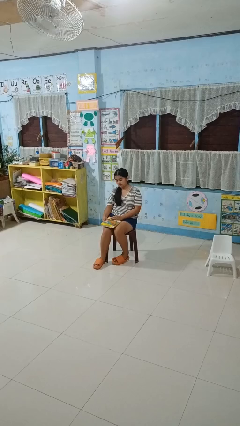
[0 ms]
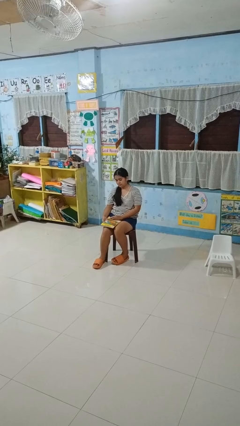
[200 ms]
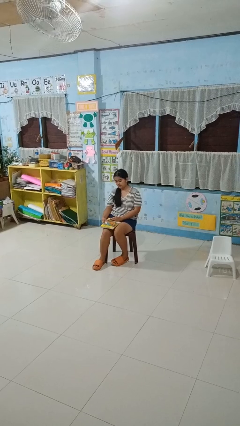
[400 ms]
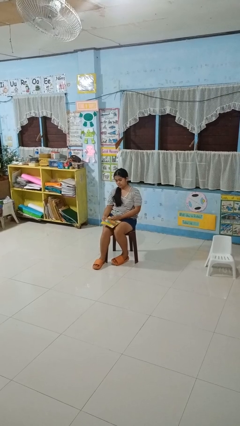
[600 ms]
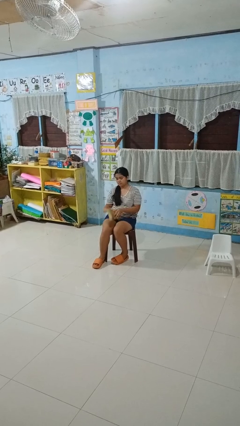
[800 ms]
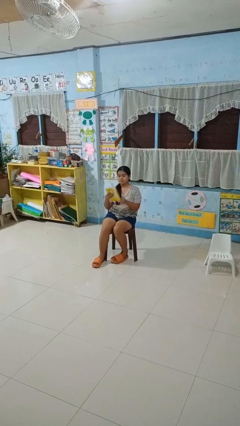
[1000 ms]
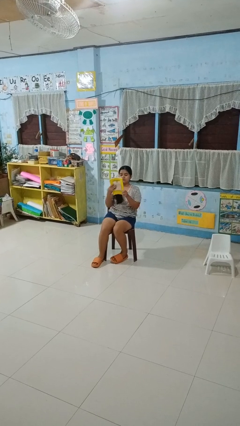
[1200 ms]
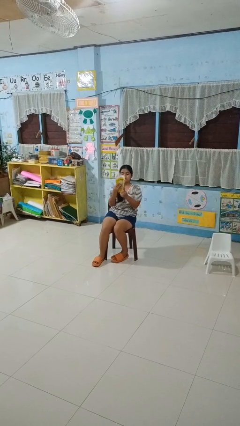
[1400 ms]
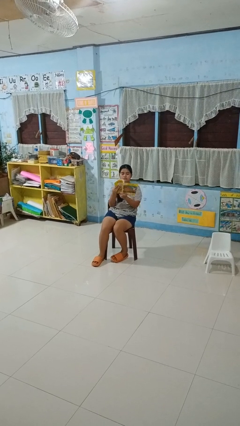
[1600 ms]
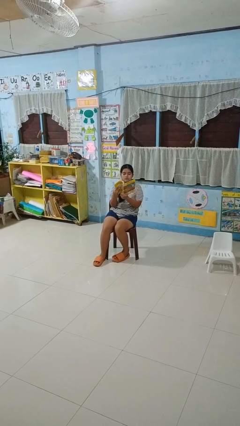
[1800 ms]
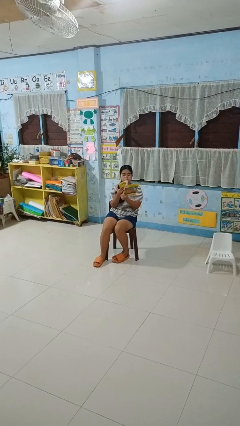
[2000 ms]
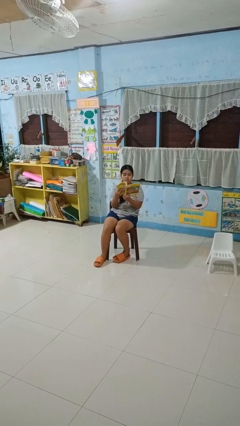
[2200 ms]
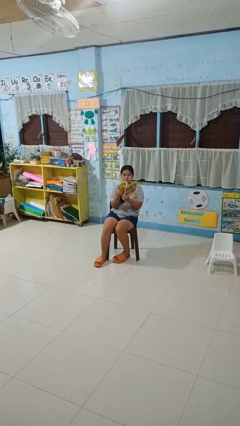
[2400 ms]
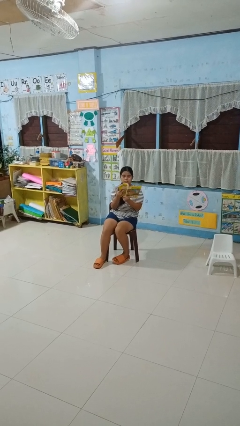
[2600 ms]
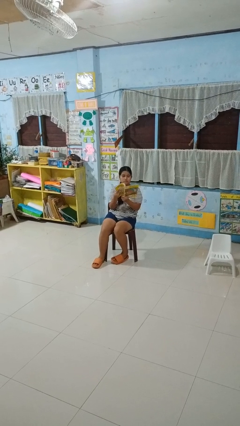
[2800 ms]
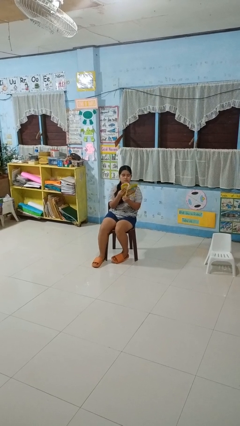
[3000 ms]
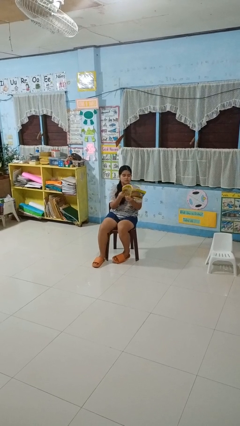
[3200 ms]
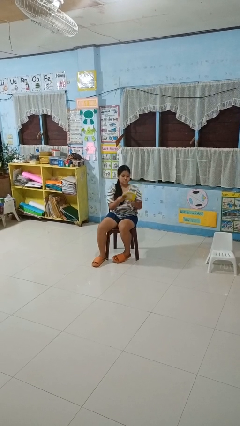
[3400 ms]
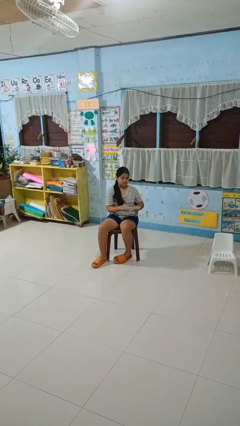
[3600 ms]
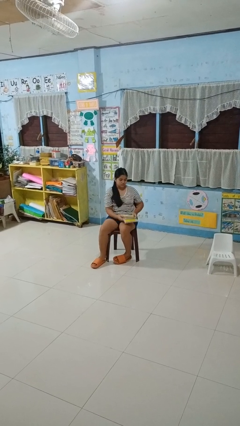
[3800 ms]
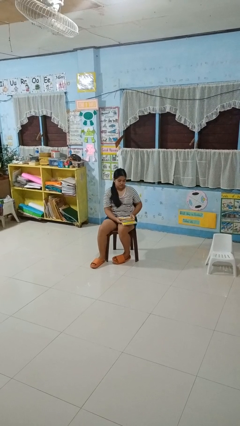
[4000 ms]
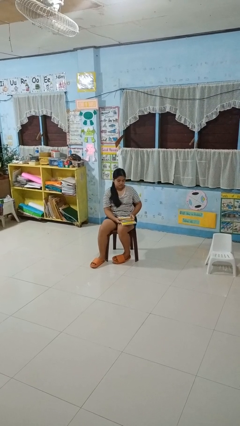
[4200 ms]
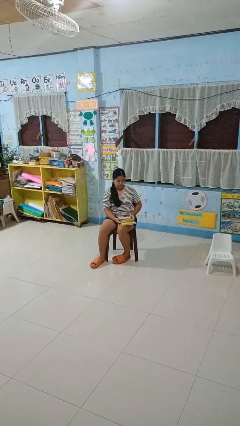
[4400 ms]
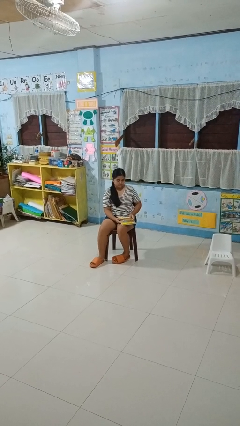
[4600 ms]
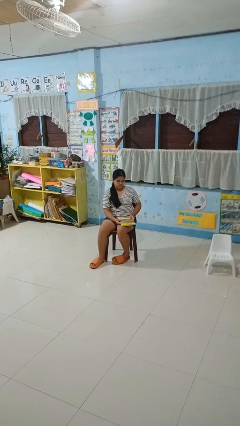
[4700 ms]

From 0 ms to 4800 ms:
person reads book

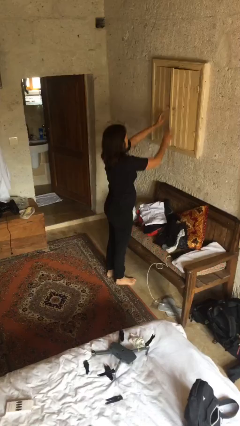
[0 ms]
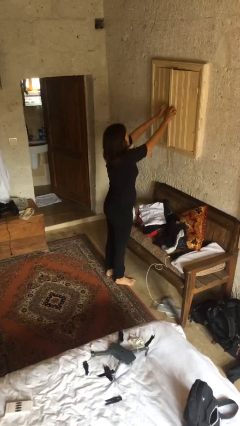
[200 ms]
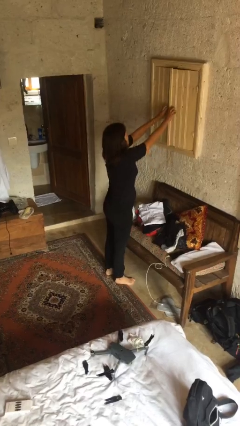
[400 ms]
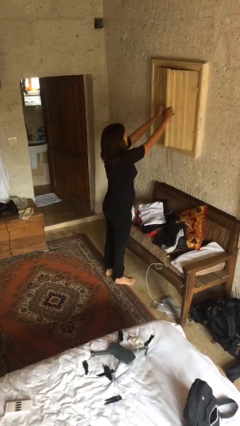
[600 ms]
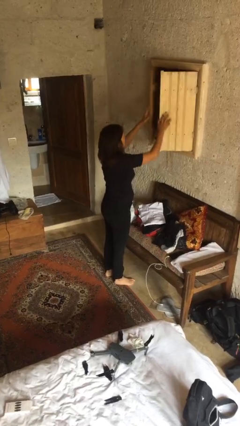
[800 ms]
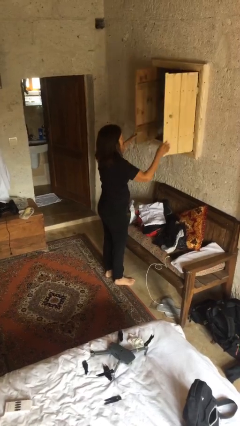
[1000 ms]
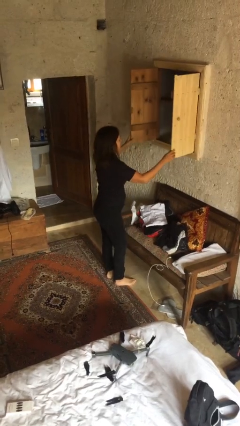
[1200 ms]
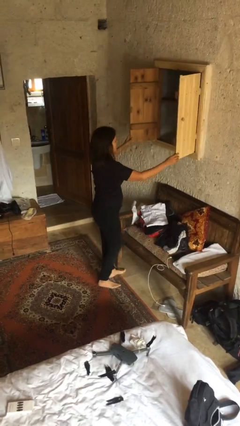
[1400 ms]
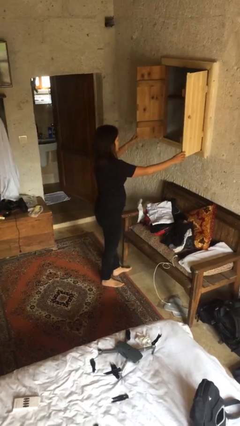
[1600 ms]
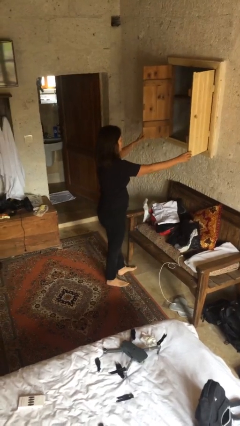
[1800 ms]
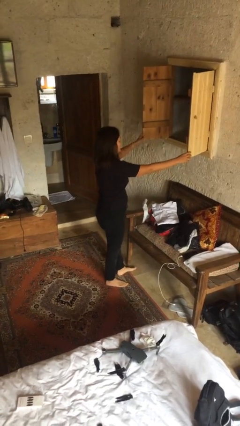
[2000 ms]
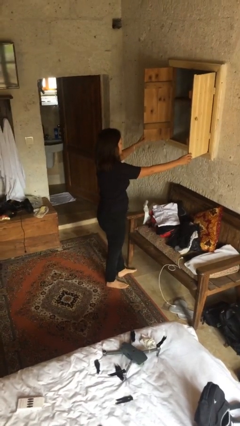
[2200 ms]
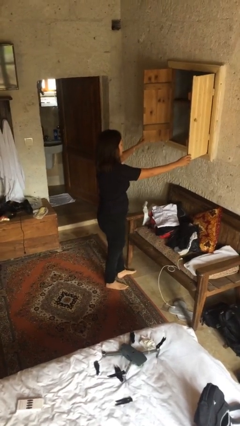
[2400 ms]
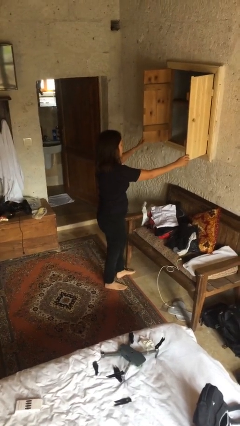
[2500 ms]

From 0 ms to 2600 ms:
person opens dresser drawer

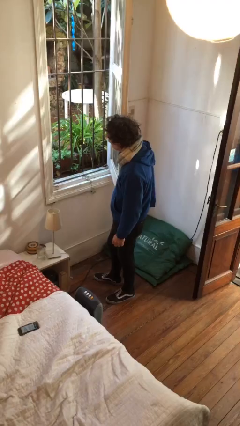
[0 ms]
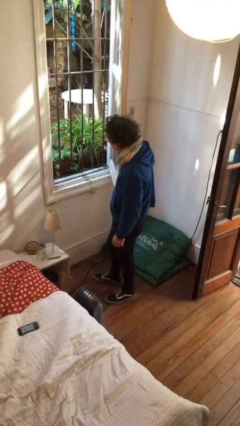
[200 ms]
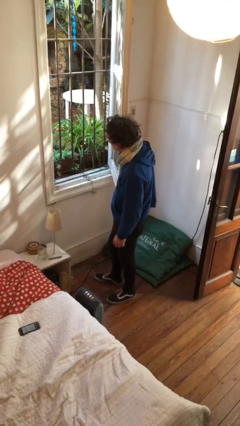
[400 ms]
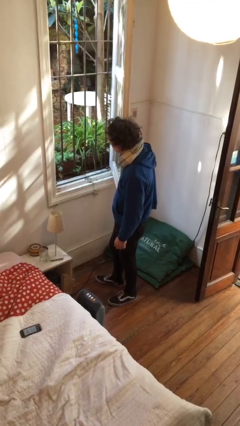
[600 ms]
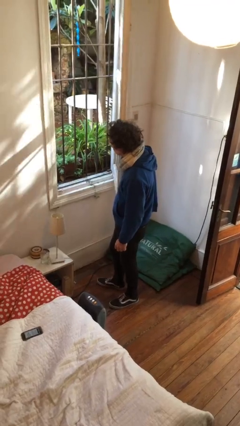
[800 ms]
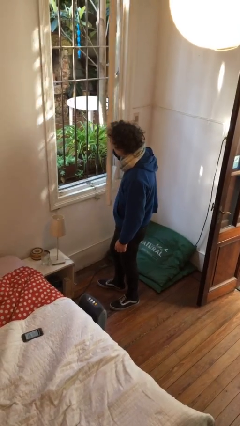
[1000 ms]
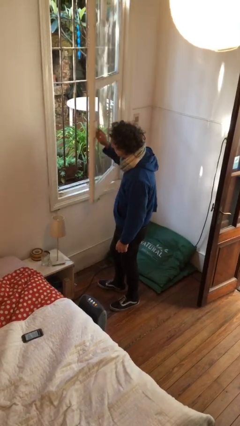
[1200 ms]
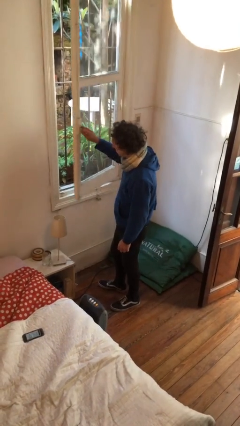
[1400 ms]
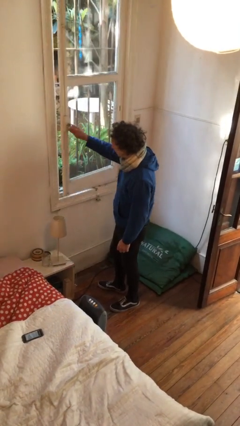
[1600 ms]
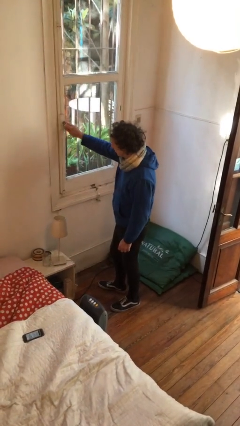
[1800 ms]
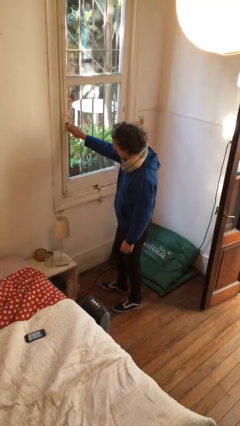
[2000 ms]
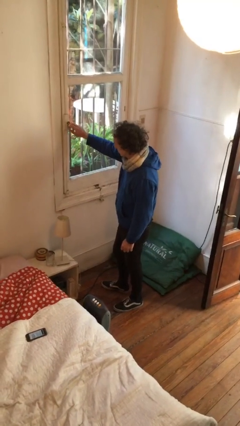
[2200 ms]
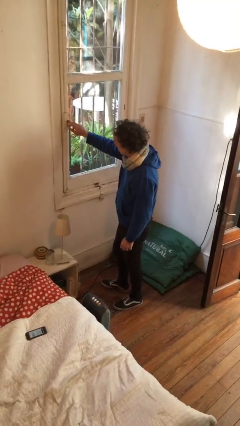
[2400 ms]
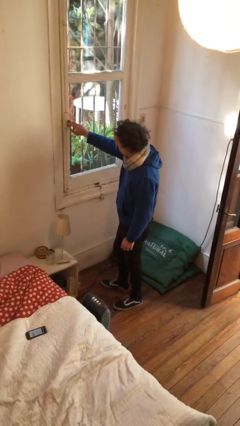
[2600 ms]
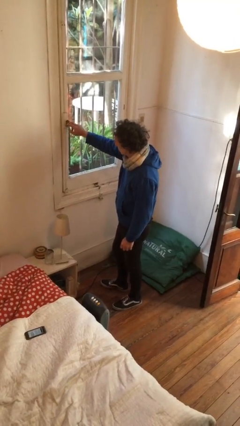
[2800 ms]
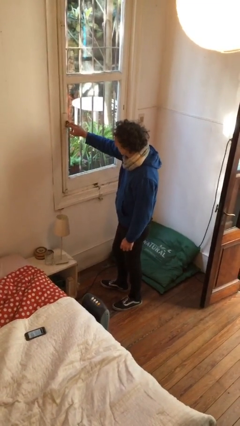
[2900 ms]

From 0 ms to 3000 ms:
person closes home window

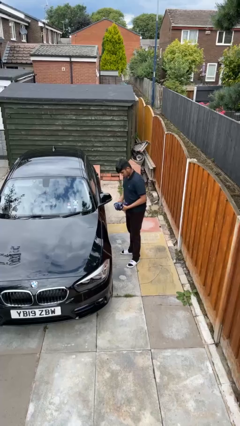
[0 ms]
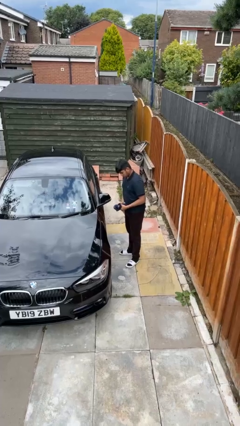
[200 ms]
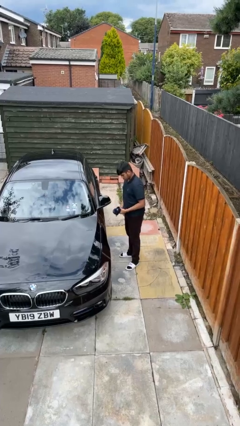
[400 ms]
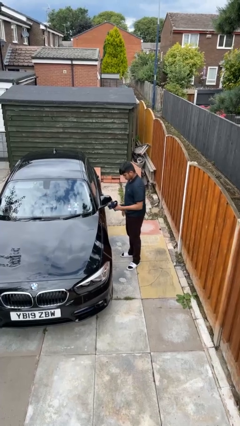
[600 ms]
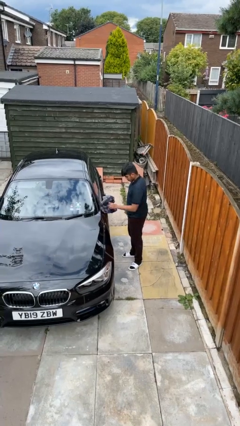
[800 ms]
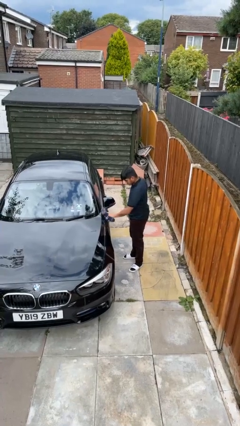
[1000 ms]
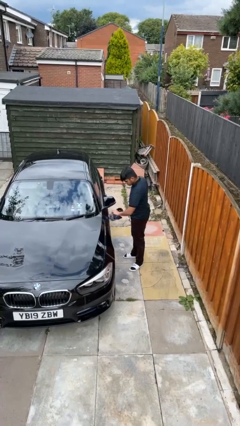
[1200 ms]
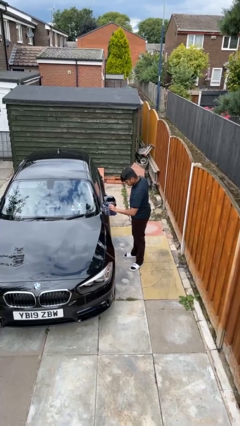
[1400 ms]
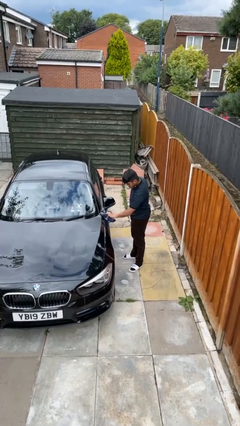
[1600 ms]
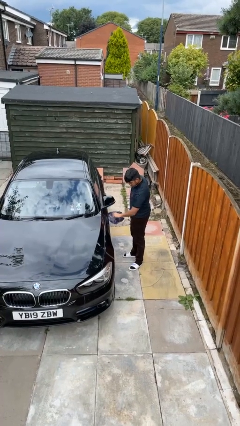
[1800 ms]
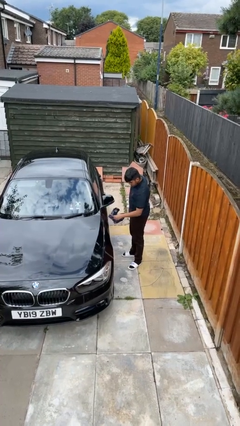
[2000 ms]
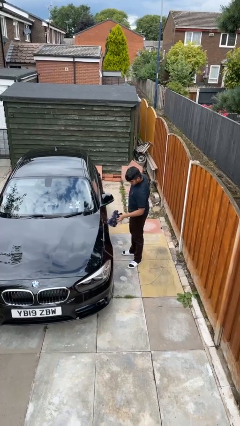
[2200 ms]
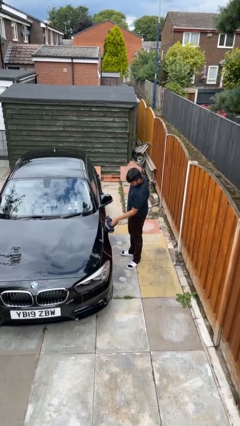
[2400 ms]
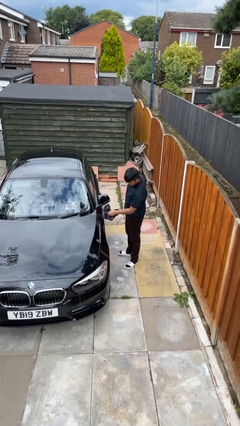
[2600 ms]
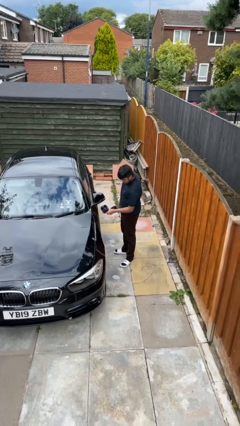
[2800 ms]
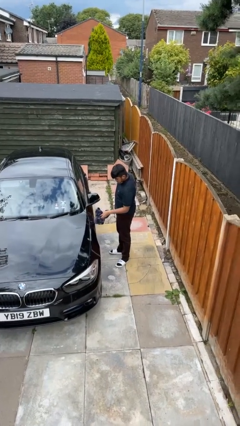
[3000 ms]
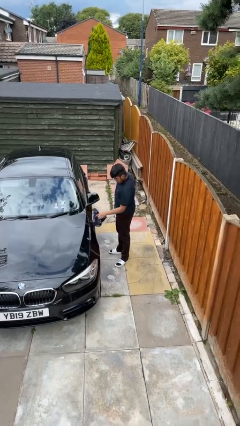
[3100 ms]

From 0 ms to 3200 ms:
person polishes car with rag

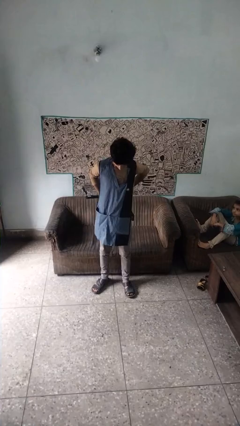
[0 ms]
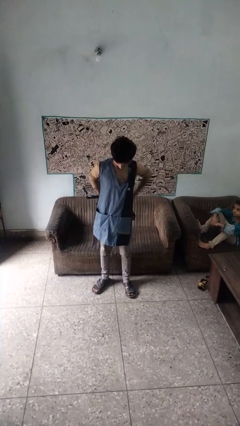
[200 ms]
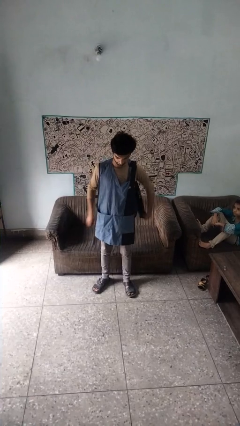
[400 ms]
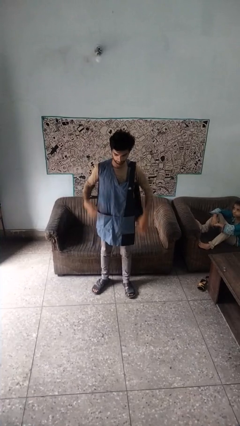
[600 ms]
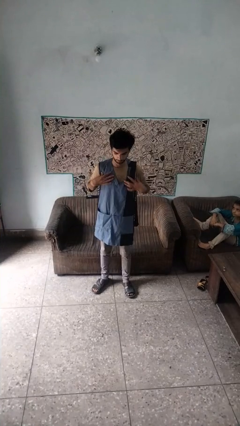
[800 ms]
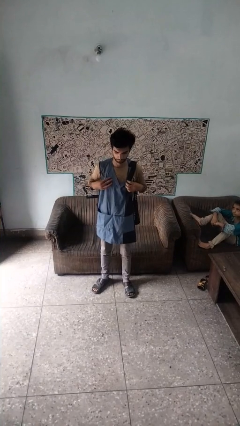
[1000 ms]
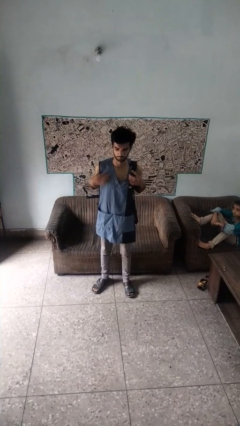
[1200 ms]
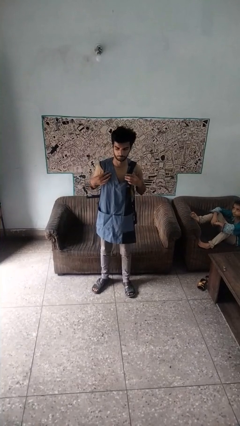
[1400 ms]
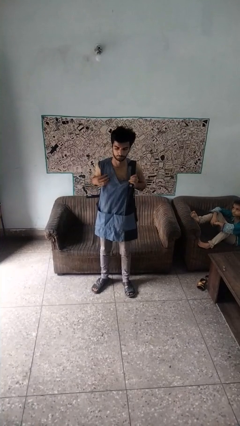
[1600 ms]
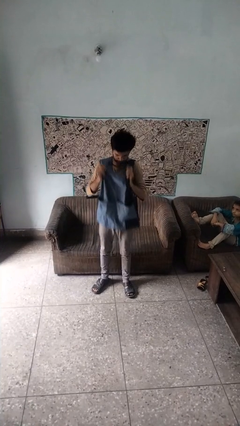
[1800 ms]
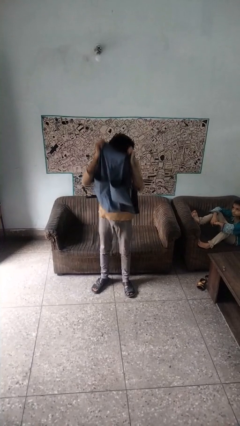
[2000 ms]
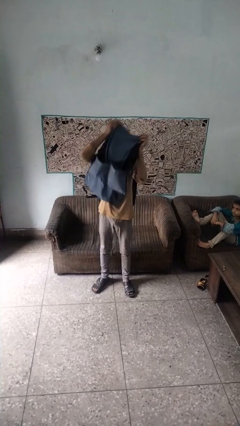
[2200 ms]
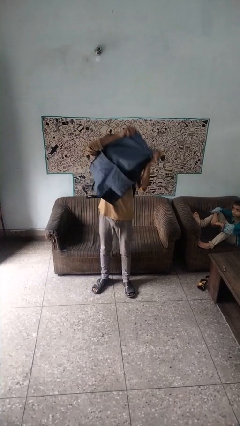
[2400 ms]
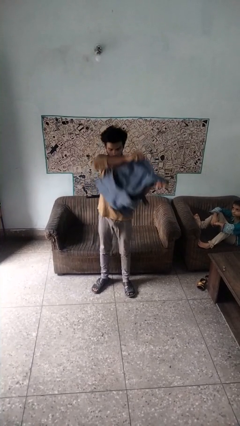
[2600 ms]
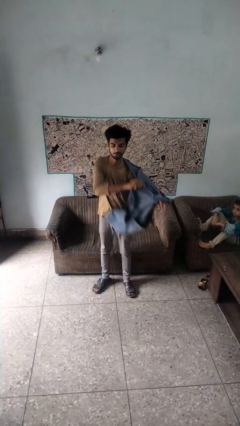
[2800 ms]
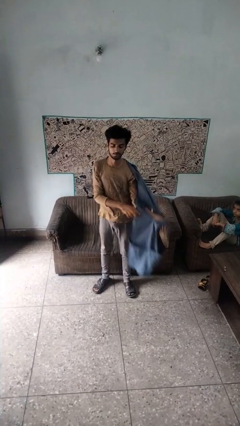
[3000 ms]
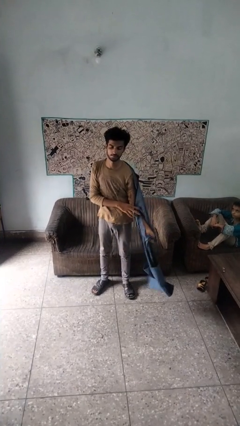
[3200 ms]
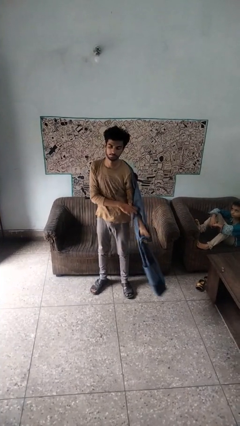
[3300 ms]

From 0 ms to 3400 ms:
person takes off apron

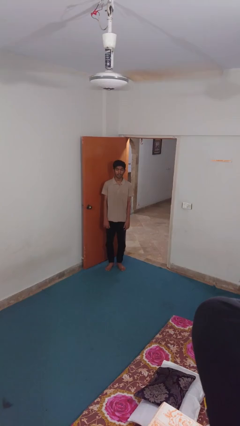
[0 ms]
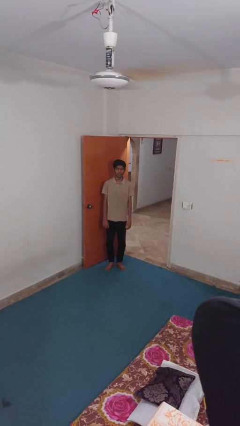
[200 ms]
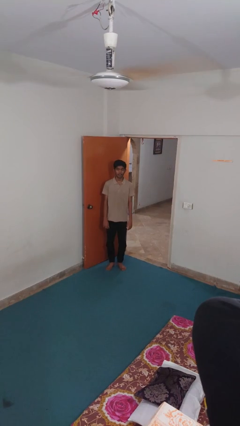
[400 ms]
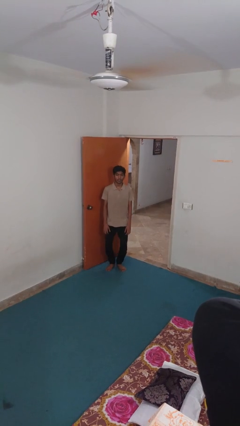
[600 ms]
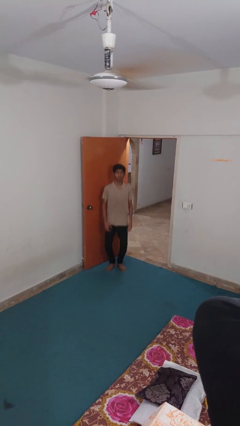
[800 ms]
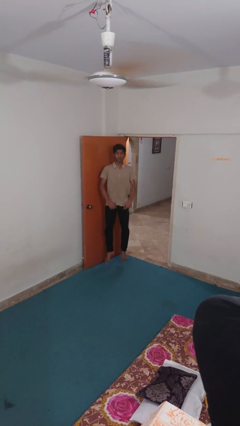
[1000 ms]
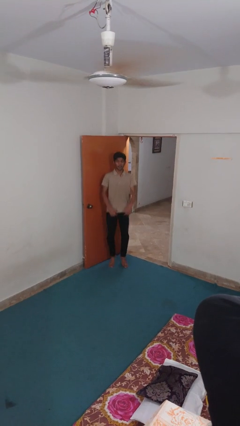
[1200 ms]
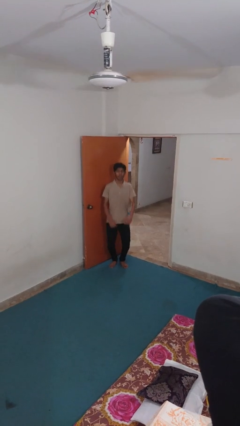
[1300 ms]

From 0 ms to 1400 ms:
person jumps
